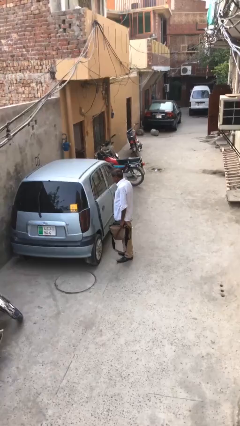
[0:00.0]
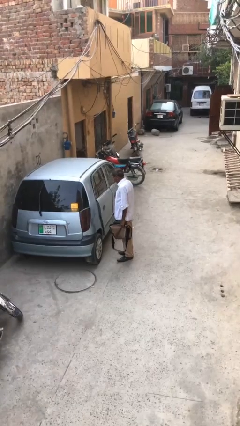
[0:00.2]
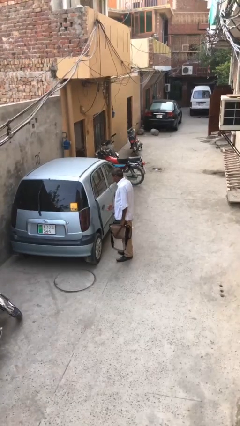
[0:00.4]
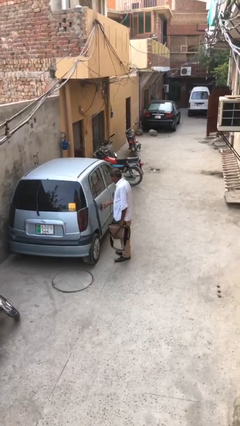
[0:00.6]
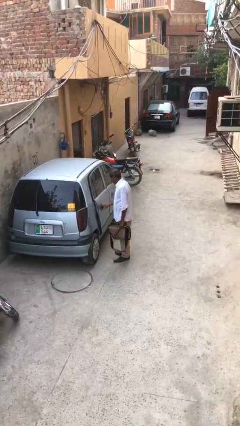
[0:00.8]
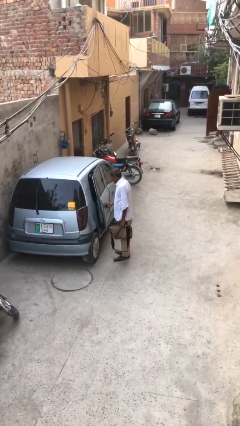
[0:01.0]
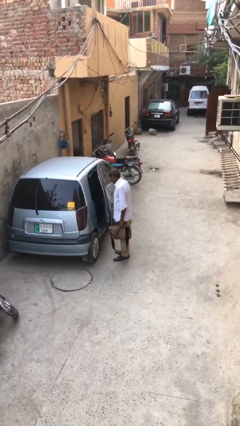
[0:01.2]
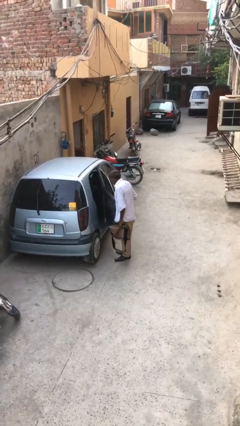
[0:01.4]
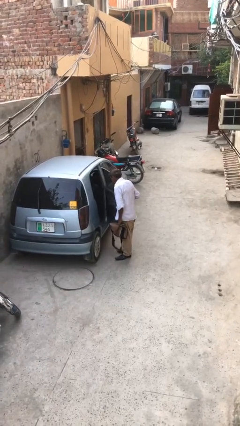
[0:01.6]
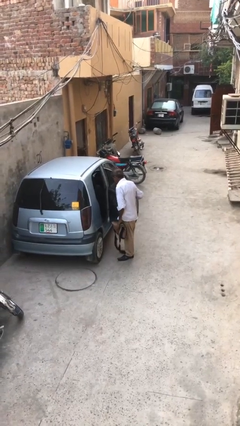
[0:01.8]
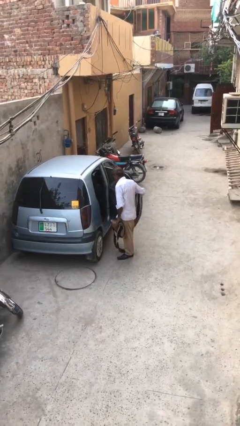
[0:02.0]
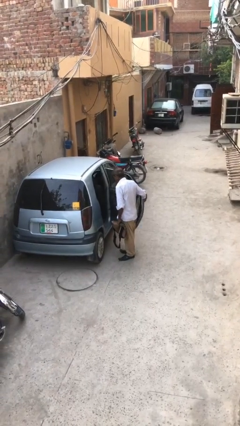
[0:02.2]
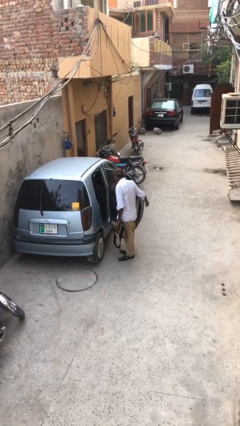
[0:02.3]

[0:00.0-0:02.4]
person opens car door

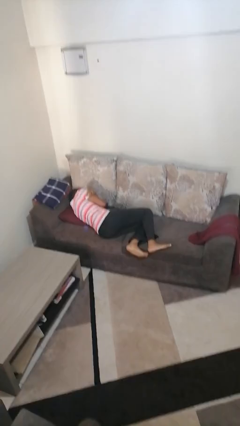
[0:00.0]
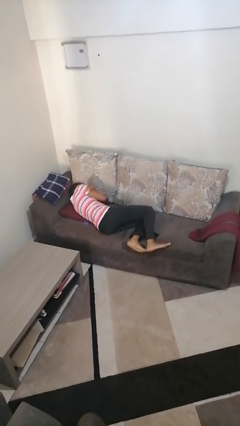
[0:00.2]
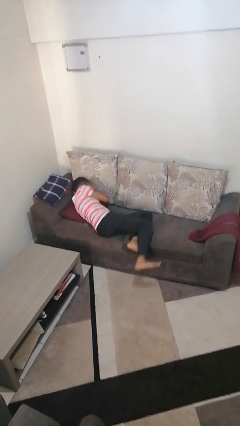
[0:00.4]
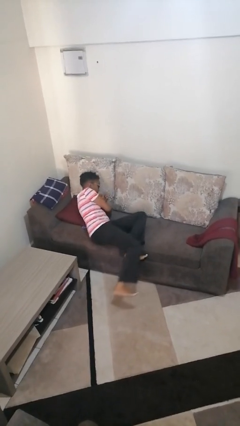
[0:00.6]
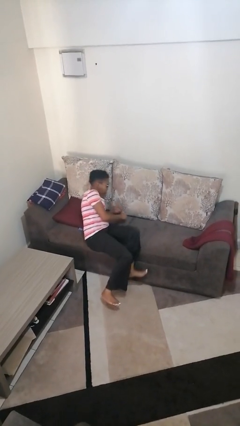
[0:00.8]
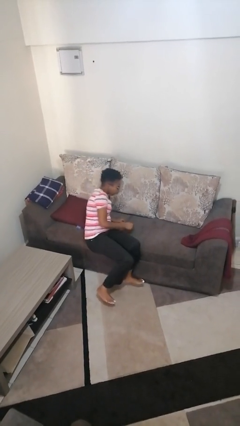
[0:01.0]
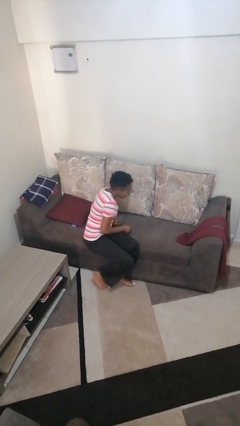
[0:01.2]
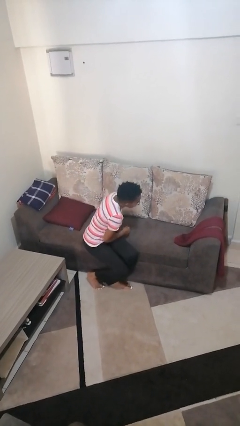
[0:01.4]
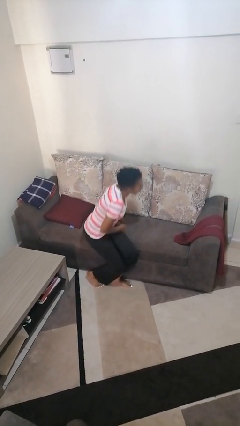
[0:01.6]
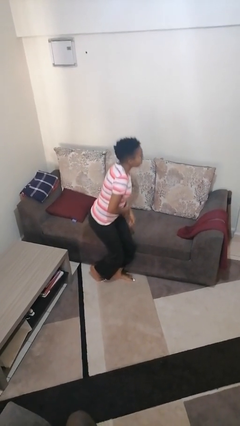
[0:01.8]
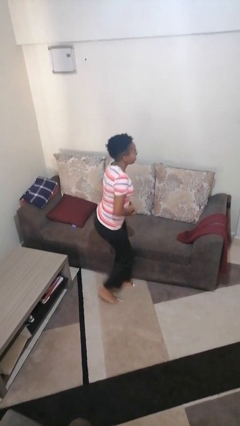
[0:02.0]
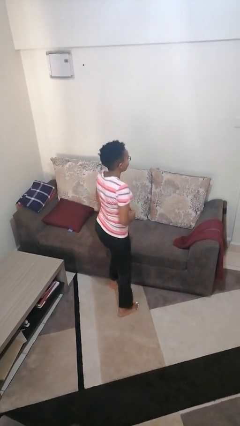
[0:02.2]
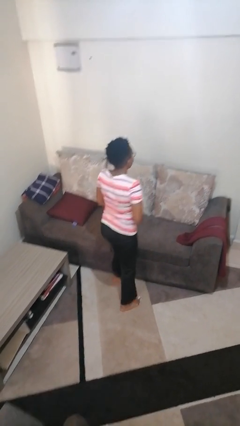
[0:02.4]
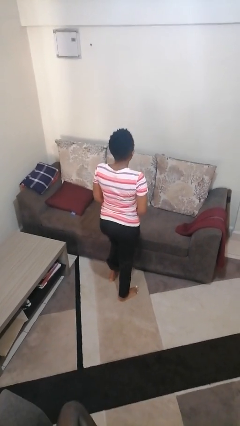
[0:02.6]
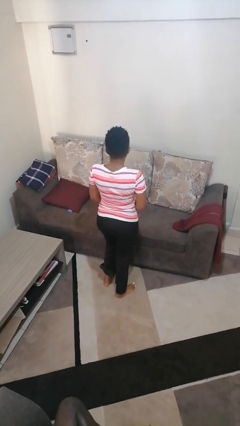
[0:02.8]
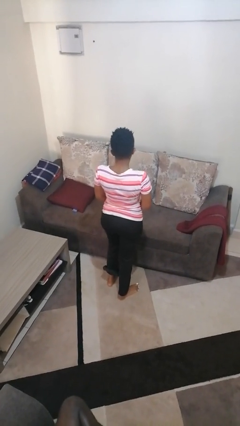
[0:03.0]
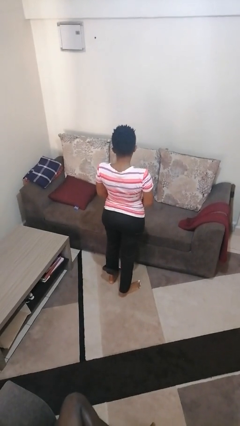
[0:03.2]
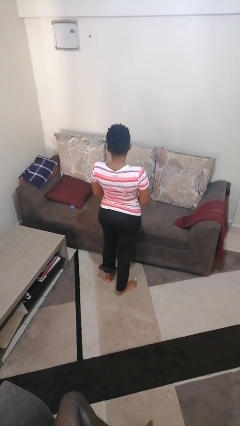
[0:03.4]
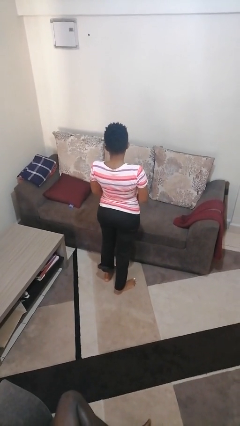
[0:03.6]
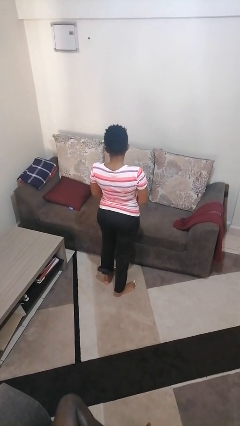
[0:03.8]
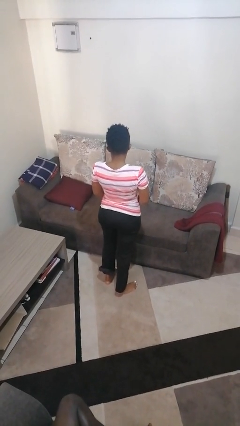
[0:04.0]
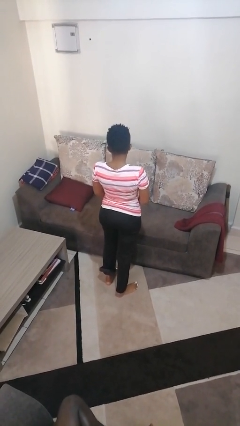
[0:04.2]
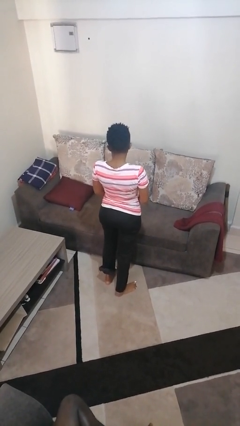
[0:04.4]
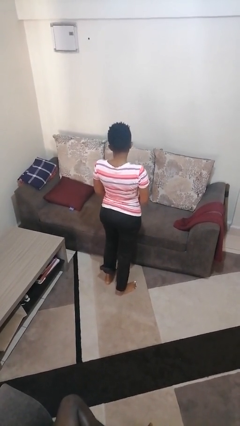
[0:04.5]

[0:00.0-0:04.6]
person stands up

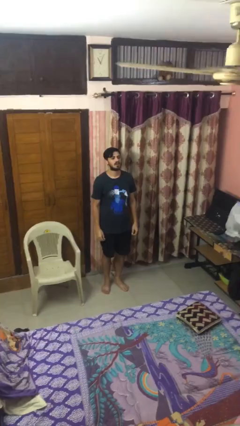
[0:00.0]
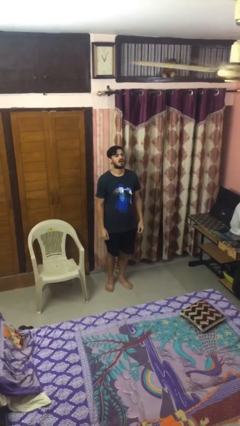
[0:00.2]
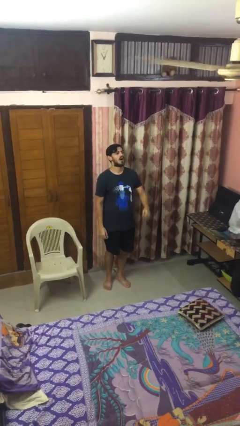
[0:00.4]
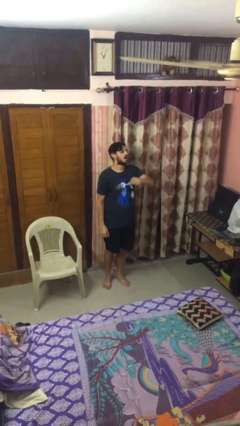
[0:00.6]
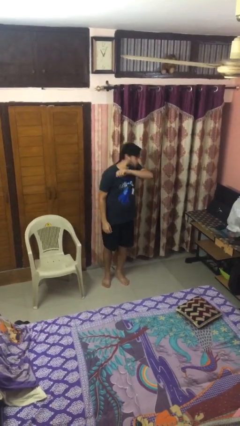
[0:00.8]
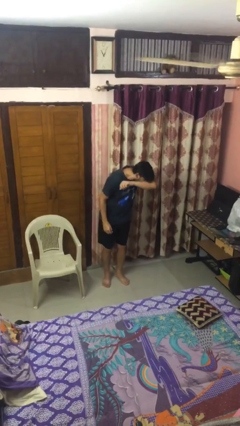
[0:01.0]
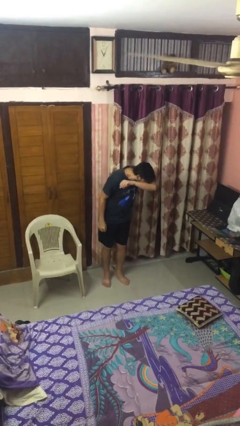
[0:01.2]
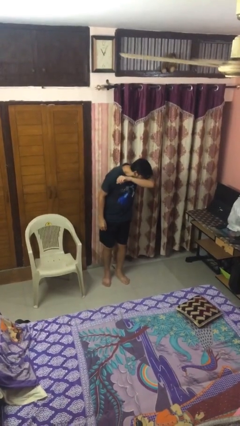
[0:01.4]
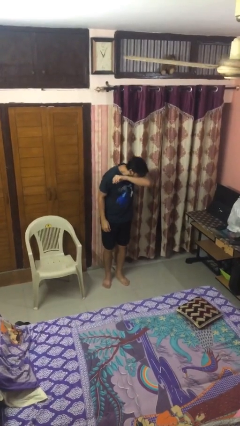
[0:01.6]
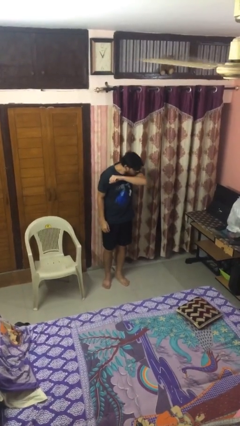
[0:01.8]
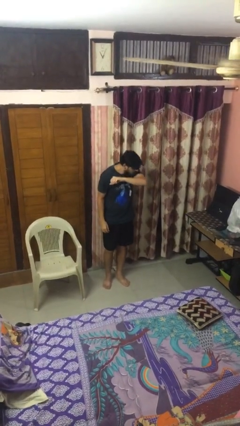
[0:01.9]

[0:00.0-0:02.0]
person sneezes into arm

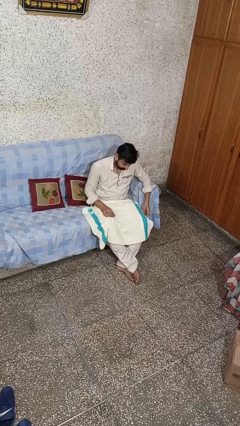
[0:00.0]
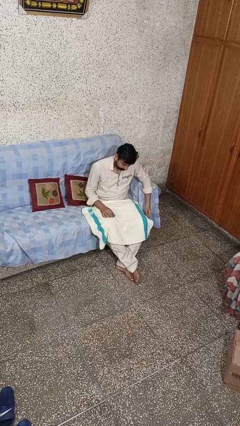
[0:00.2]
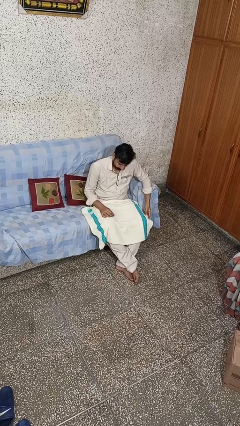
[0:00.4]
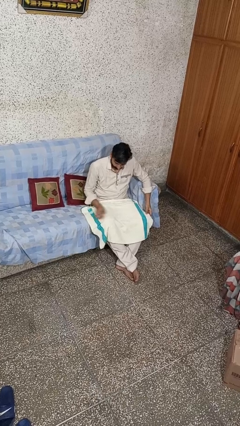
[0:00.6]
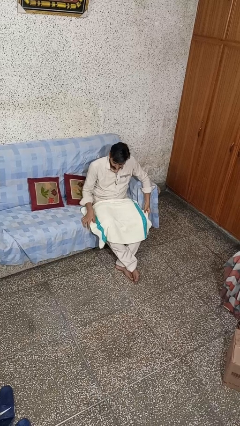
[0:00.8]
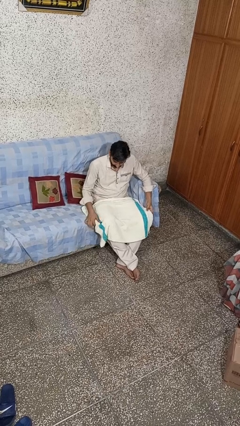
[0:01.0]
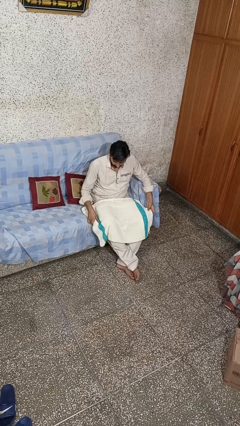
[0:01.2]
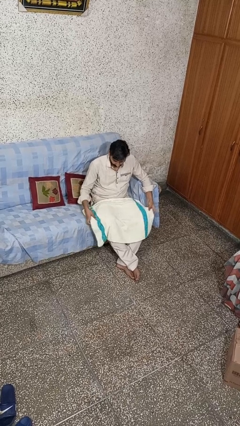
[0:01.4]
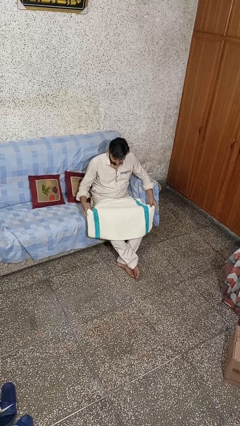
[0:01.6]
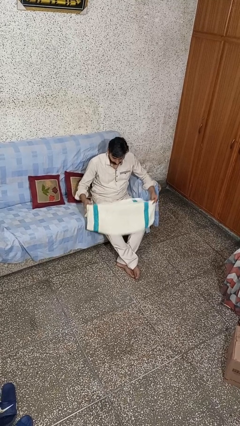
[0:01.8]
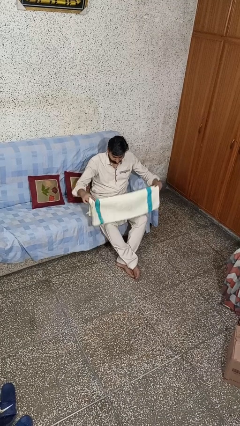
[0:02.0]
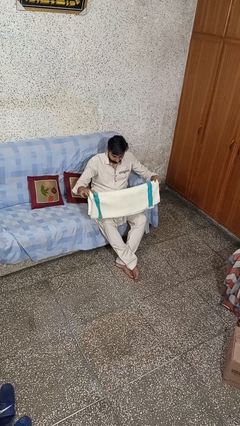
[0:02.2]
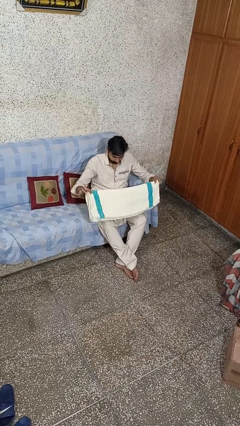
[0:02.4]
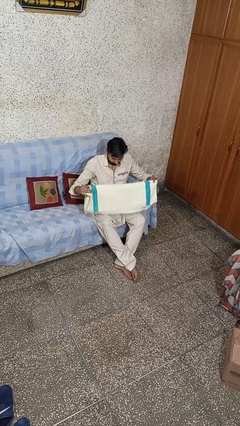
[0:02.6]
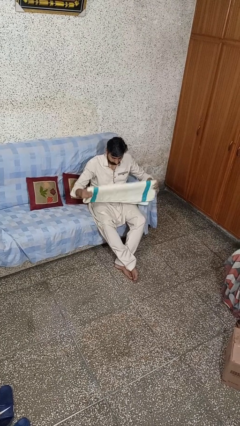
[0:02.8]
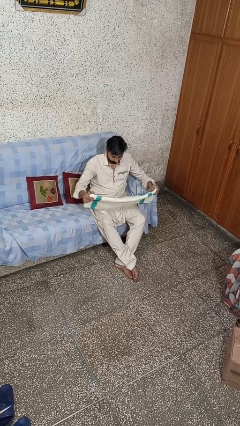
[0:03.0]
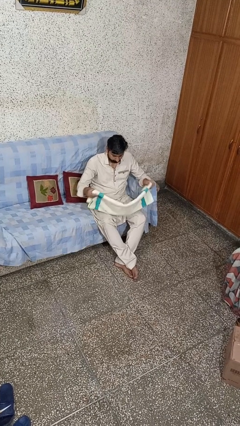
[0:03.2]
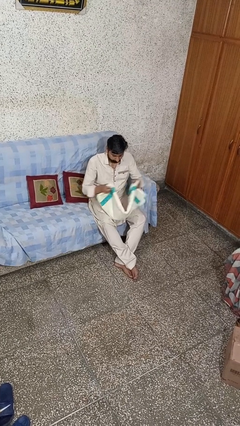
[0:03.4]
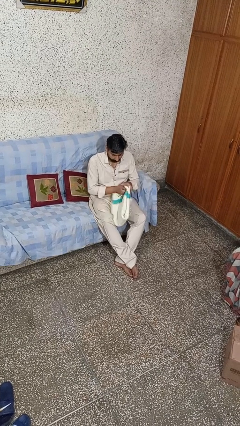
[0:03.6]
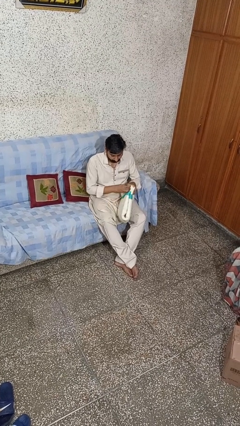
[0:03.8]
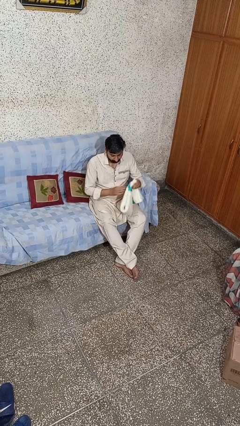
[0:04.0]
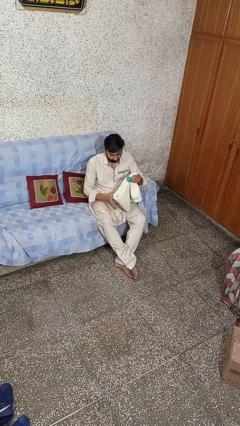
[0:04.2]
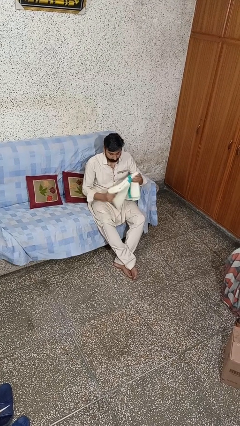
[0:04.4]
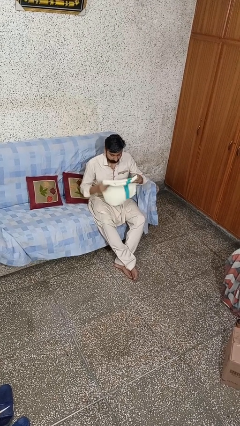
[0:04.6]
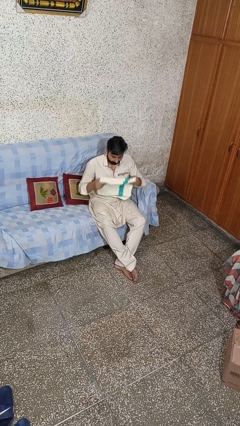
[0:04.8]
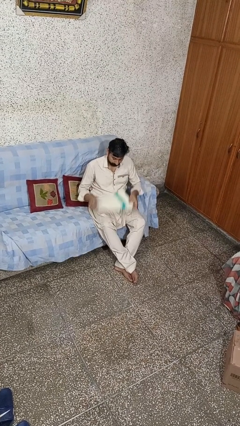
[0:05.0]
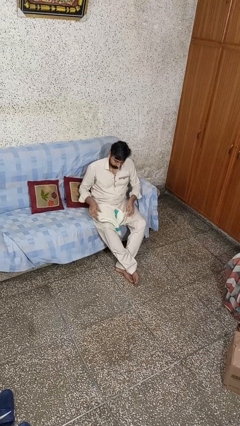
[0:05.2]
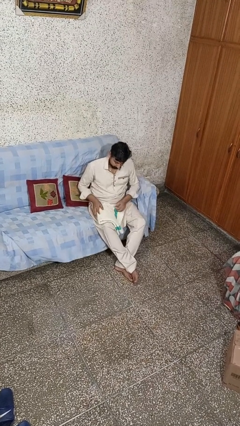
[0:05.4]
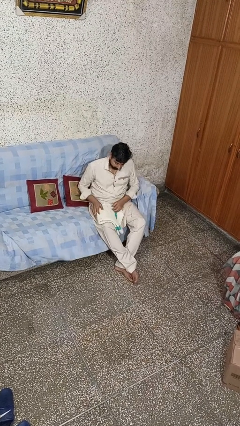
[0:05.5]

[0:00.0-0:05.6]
person folds towel

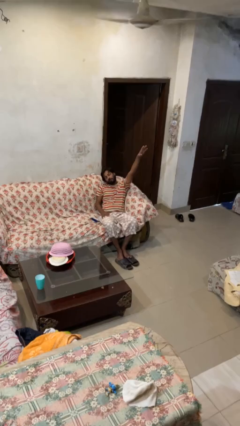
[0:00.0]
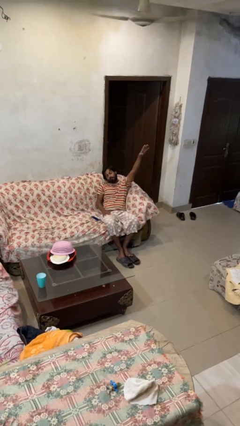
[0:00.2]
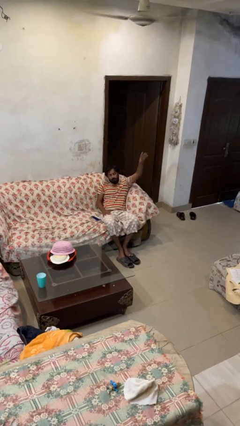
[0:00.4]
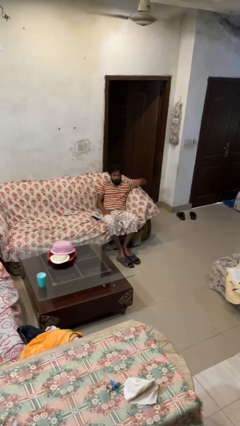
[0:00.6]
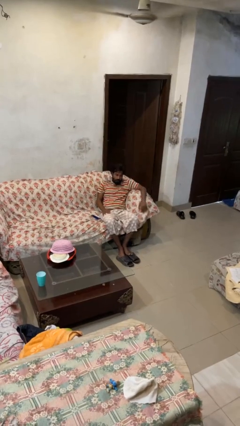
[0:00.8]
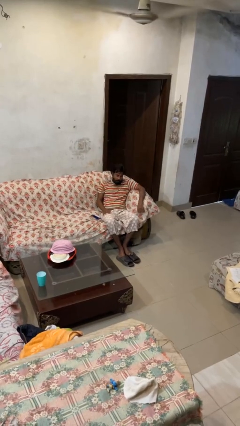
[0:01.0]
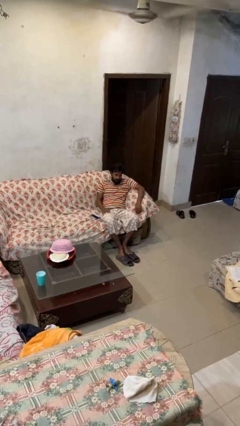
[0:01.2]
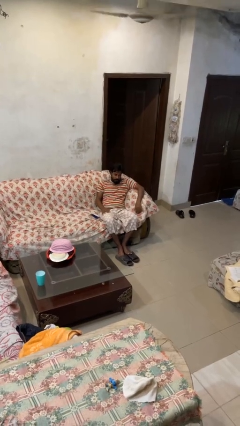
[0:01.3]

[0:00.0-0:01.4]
person gestures lower hand

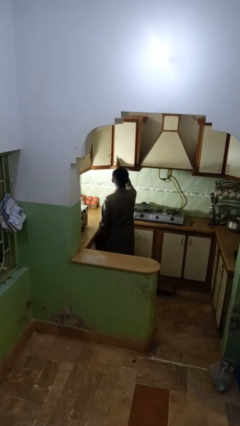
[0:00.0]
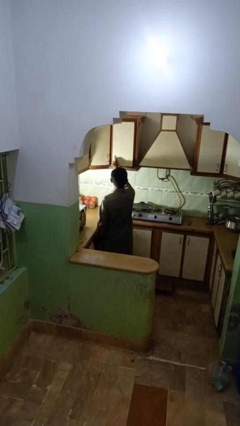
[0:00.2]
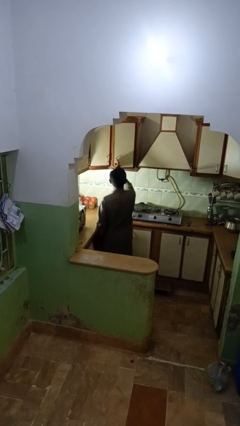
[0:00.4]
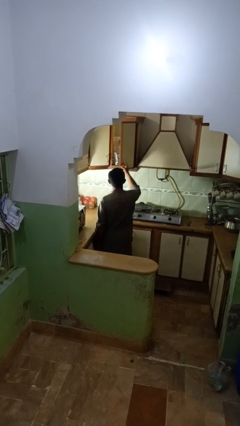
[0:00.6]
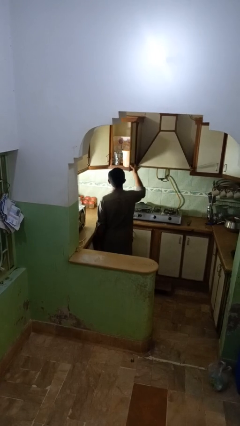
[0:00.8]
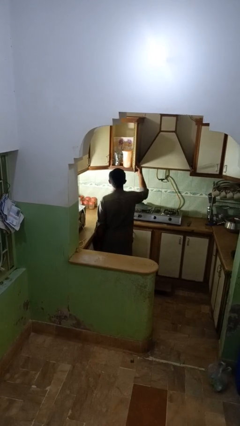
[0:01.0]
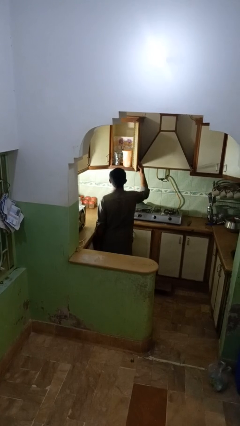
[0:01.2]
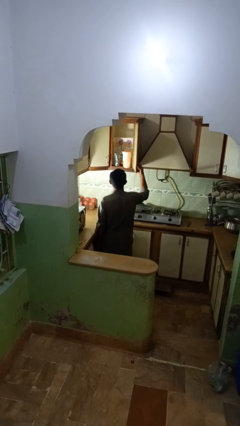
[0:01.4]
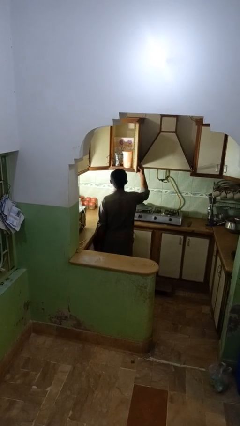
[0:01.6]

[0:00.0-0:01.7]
person opens kitchen drawer
